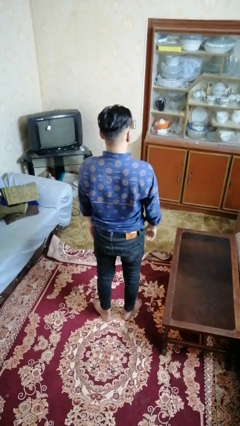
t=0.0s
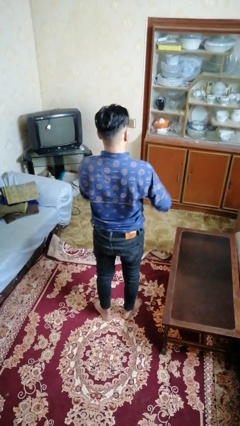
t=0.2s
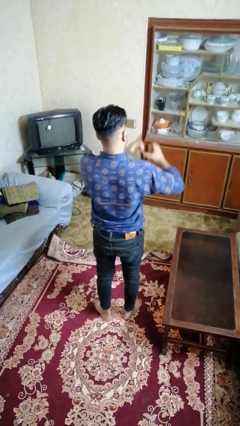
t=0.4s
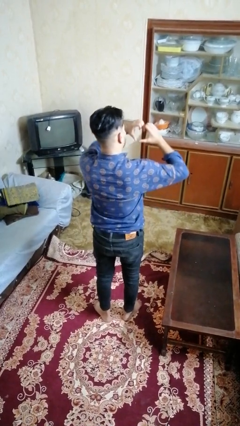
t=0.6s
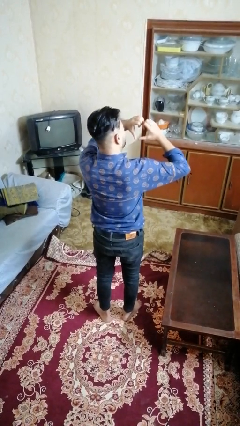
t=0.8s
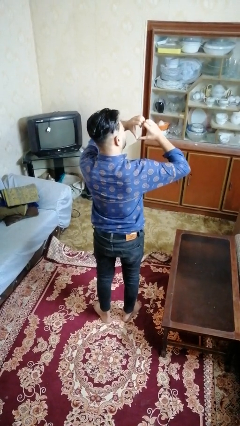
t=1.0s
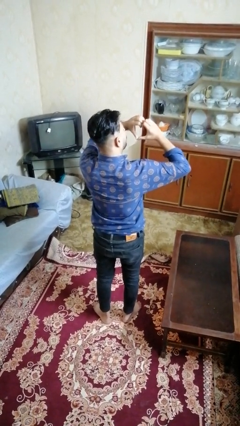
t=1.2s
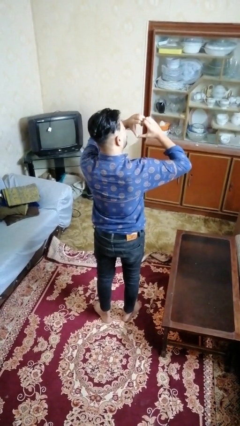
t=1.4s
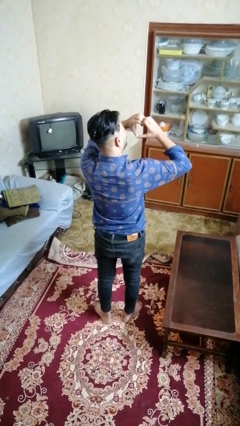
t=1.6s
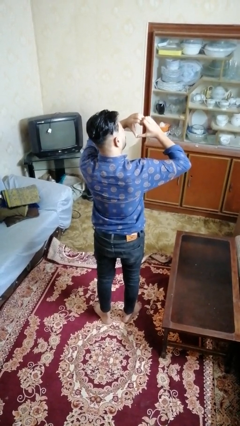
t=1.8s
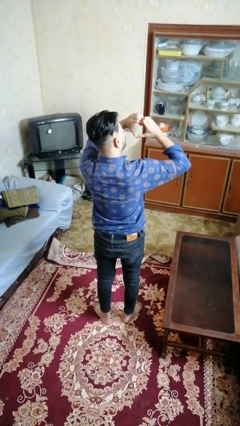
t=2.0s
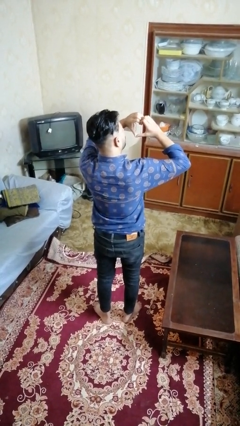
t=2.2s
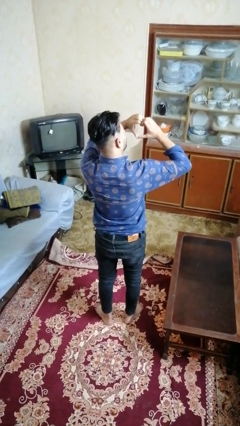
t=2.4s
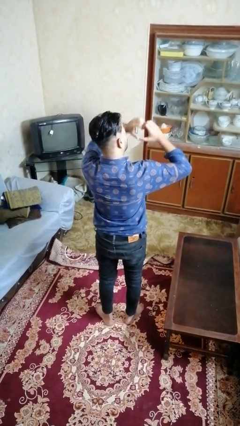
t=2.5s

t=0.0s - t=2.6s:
person gestures heart

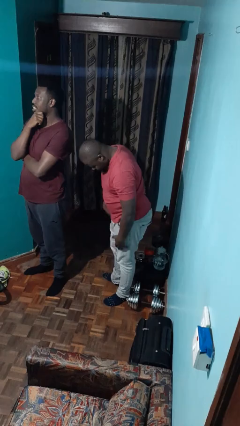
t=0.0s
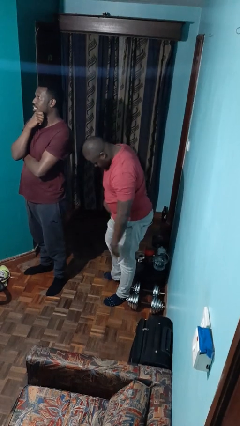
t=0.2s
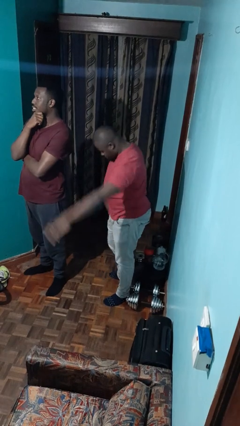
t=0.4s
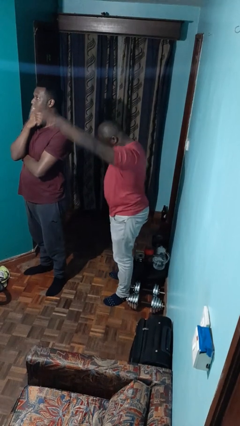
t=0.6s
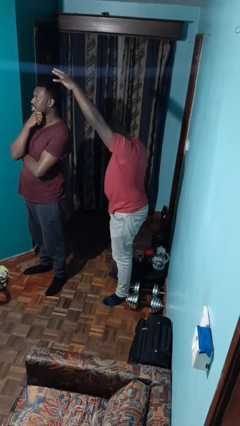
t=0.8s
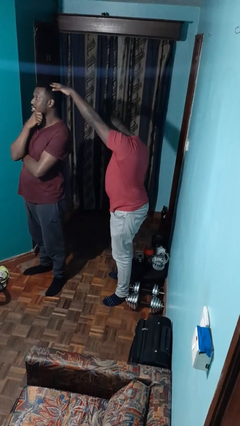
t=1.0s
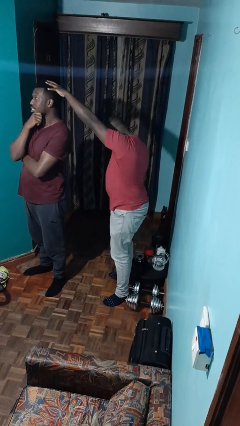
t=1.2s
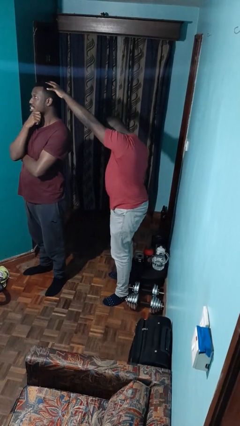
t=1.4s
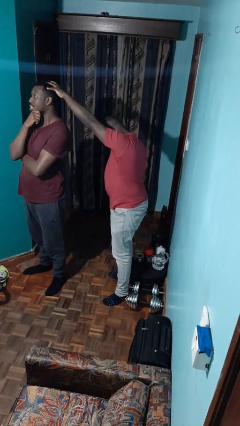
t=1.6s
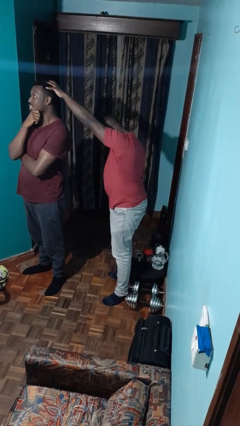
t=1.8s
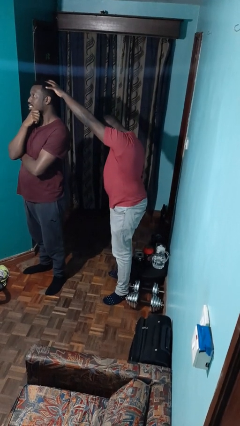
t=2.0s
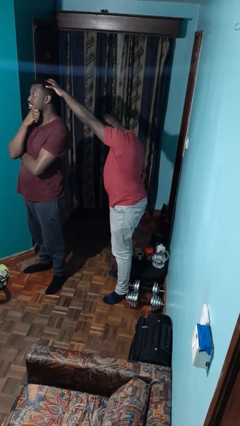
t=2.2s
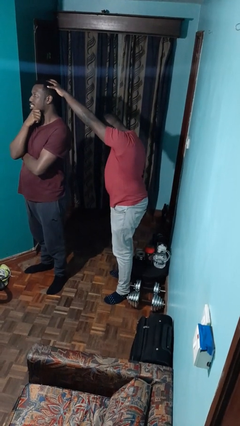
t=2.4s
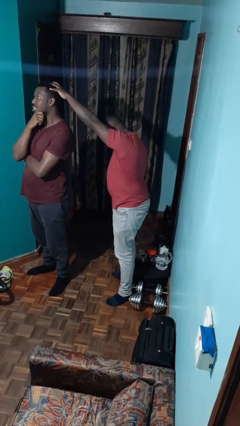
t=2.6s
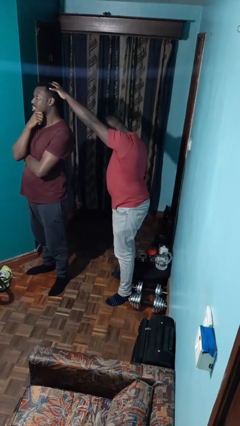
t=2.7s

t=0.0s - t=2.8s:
person grabs person by hair

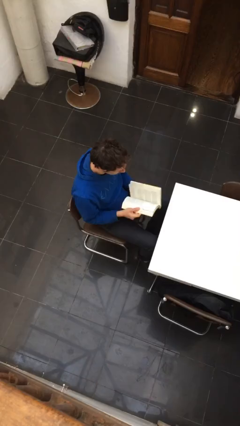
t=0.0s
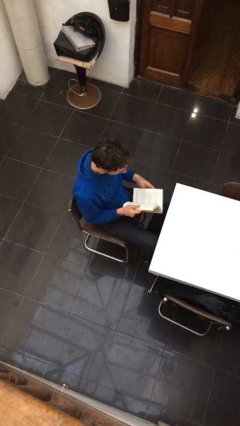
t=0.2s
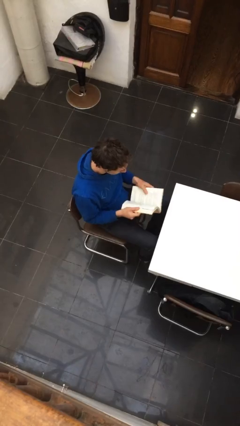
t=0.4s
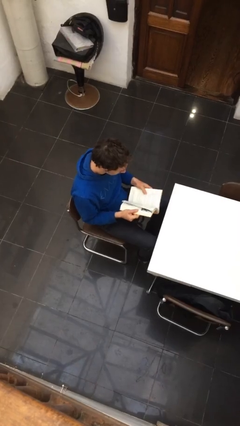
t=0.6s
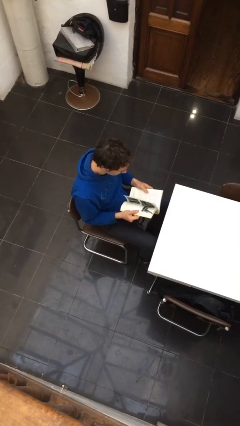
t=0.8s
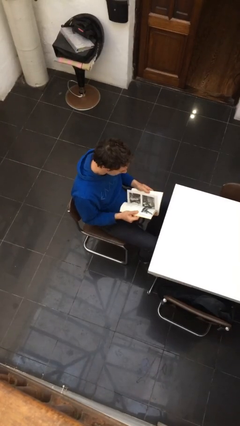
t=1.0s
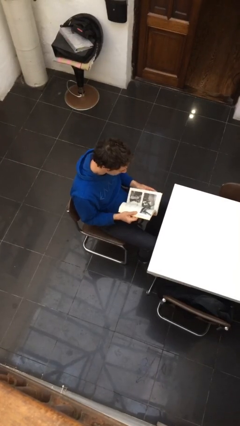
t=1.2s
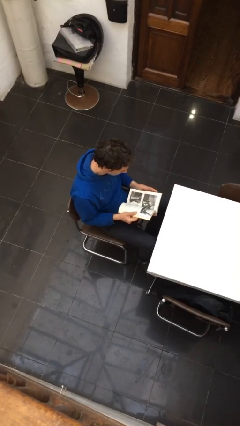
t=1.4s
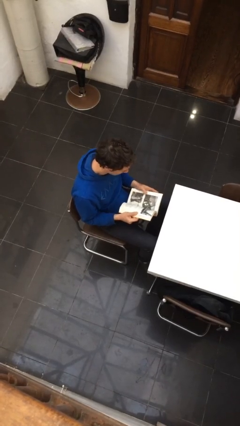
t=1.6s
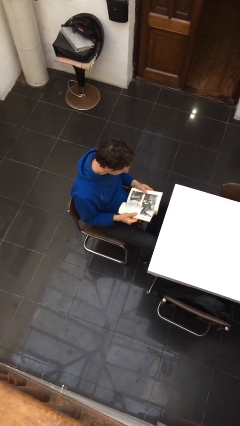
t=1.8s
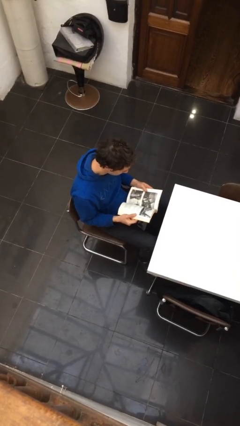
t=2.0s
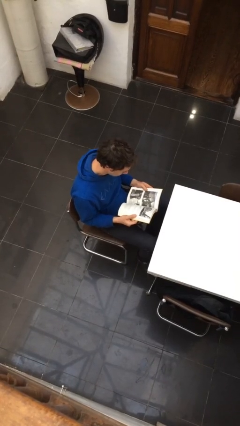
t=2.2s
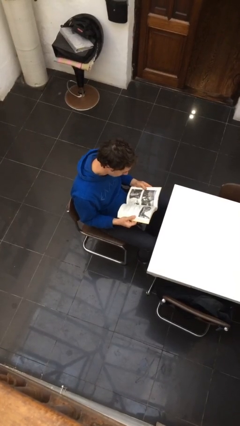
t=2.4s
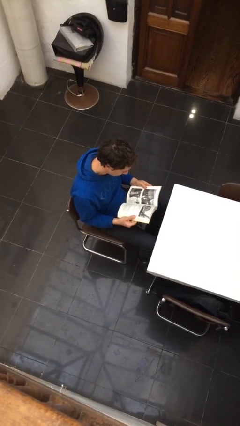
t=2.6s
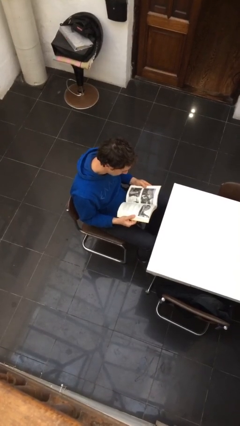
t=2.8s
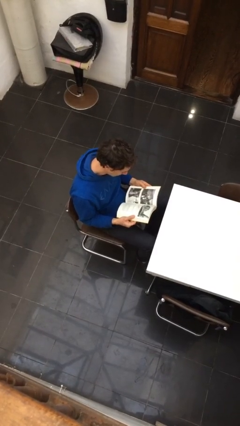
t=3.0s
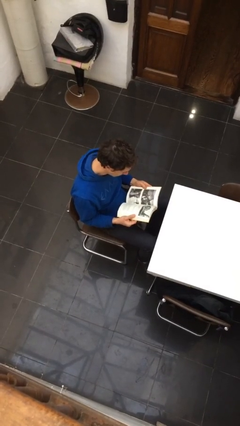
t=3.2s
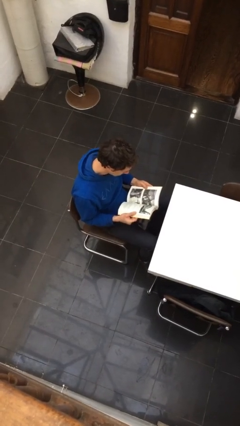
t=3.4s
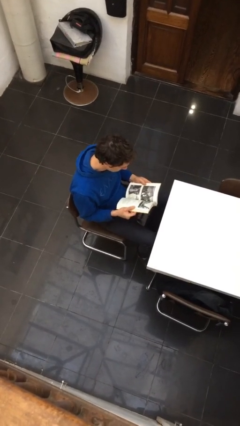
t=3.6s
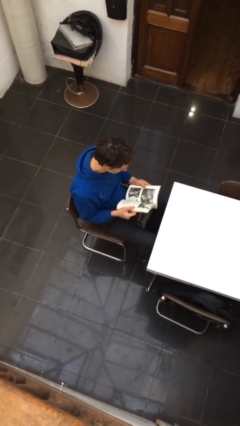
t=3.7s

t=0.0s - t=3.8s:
person reads document

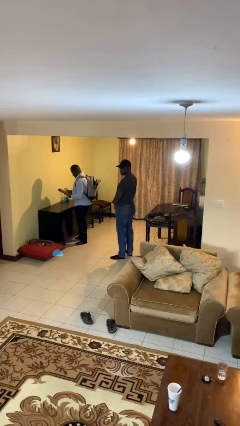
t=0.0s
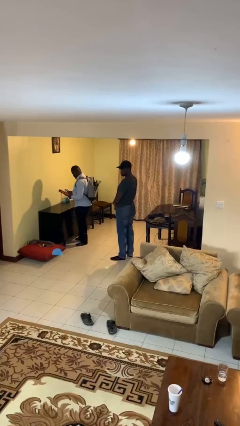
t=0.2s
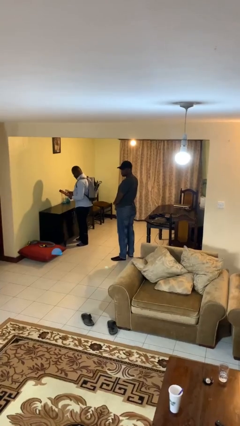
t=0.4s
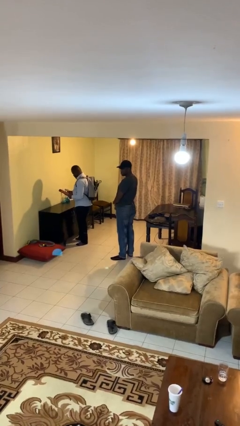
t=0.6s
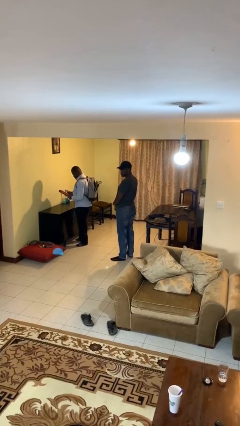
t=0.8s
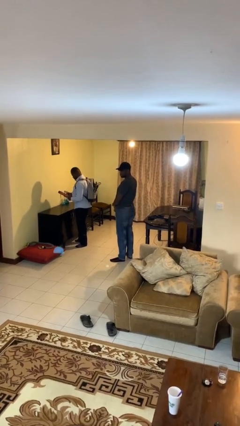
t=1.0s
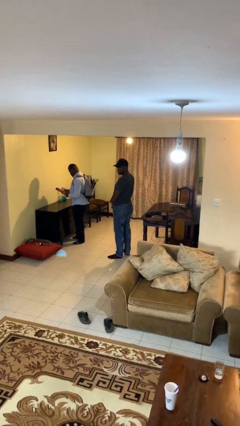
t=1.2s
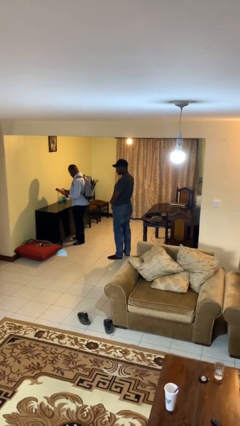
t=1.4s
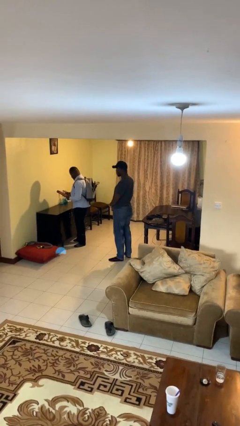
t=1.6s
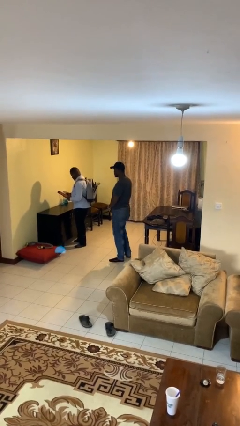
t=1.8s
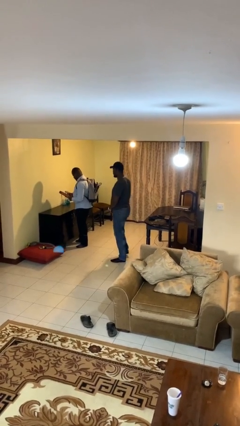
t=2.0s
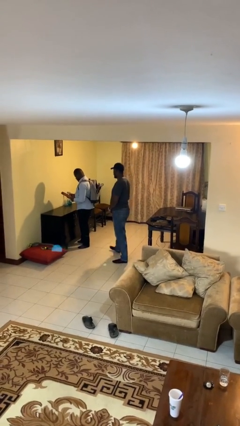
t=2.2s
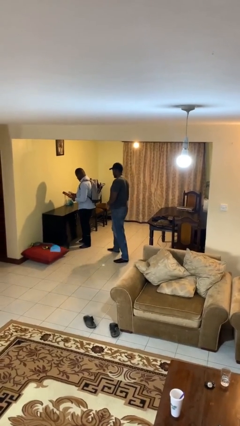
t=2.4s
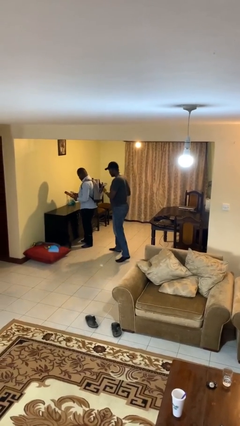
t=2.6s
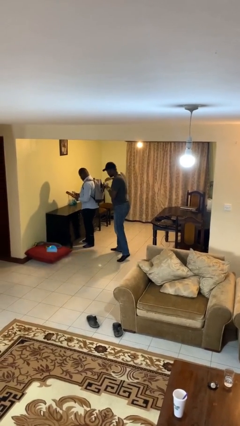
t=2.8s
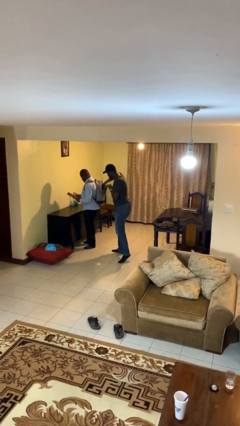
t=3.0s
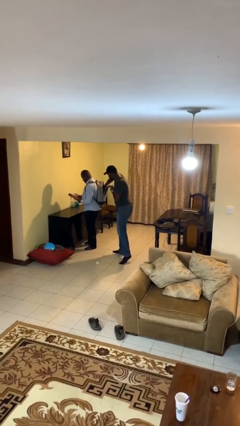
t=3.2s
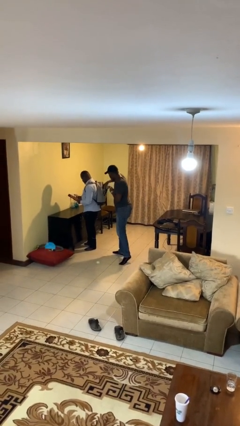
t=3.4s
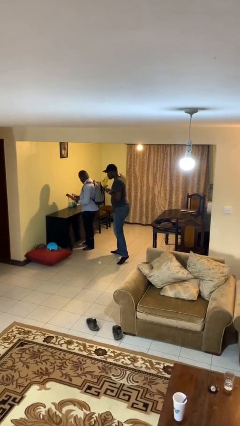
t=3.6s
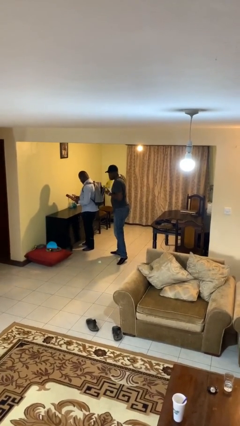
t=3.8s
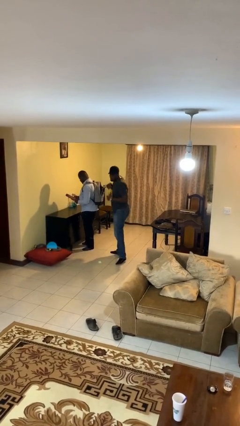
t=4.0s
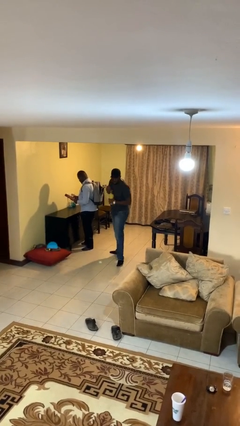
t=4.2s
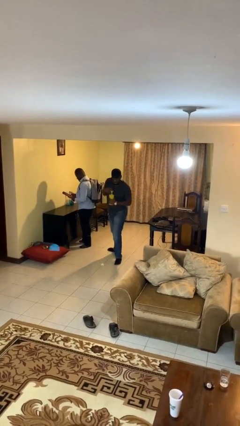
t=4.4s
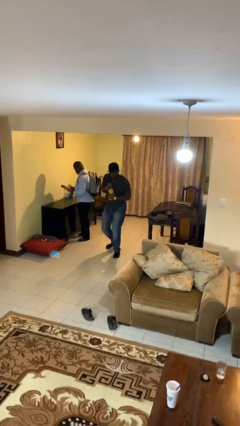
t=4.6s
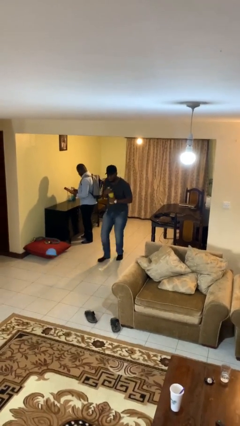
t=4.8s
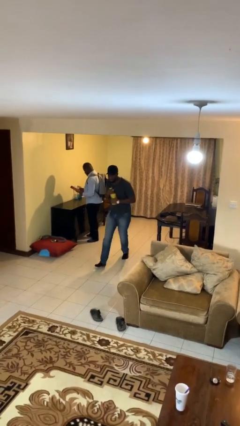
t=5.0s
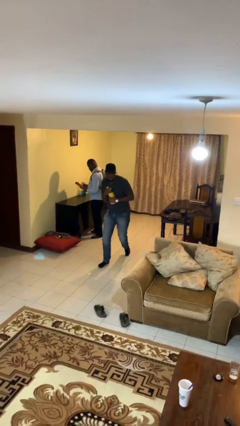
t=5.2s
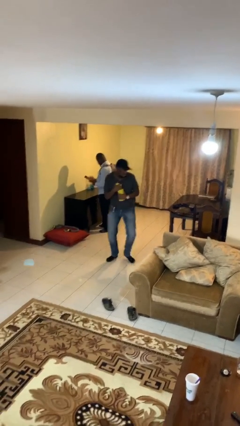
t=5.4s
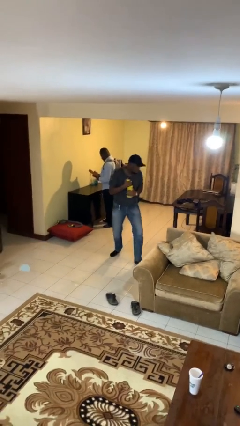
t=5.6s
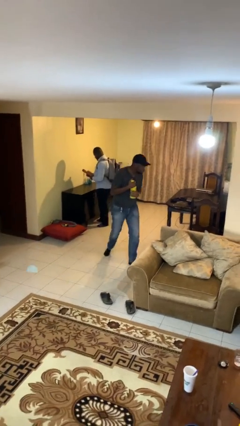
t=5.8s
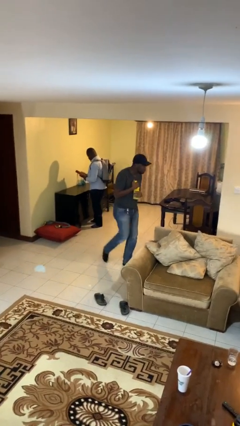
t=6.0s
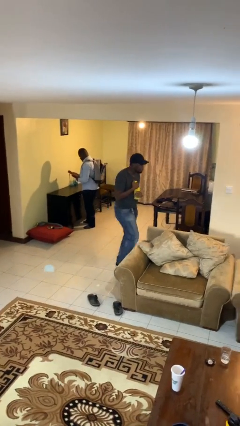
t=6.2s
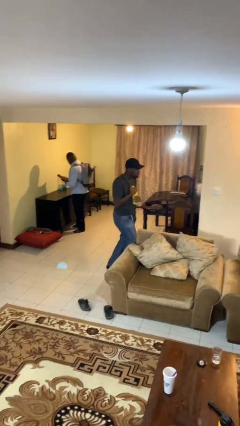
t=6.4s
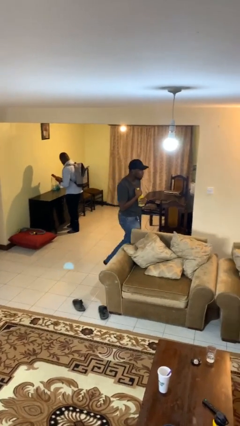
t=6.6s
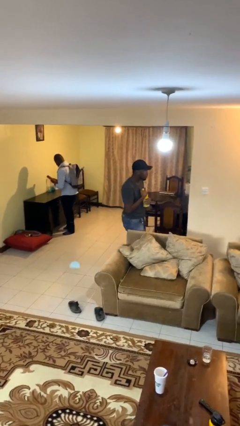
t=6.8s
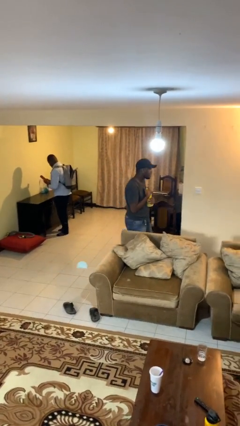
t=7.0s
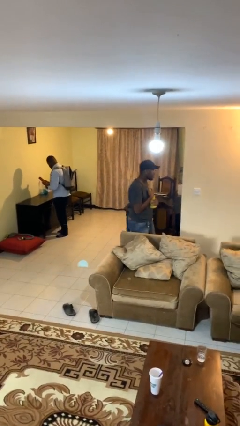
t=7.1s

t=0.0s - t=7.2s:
person steals object from person

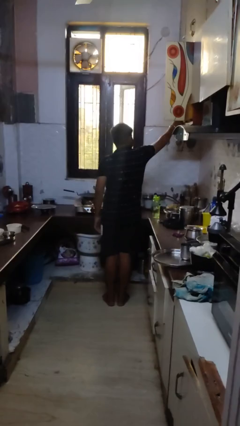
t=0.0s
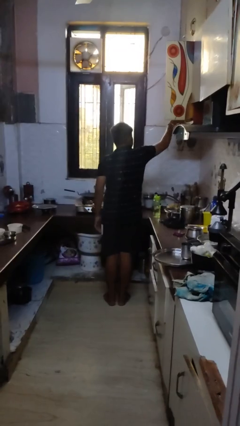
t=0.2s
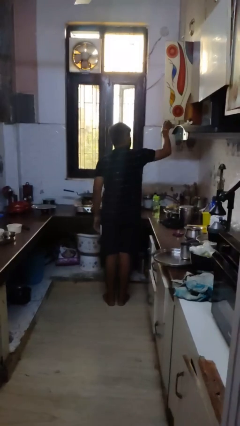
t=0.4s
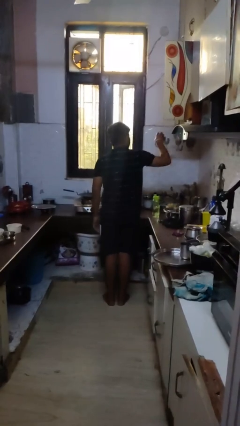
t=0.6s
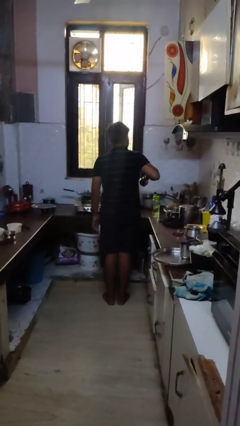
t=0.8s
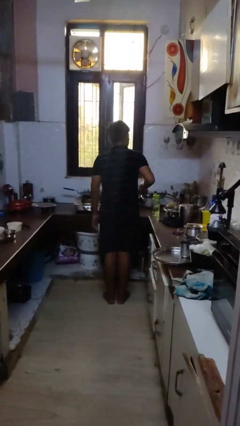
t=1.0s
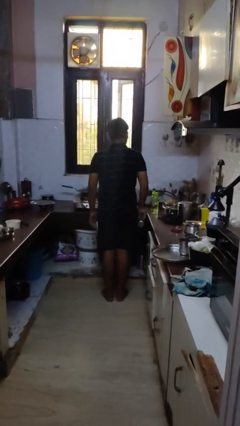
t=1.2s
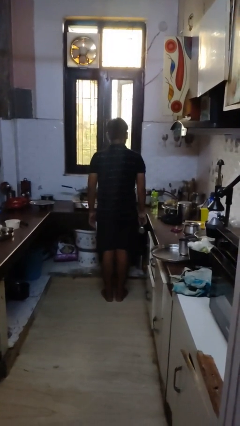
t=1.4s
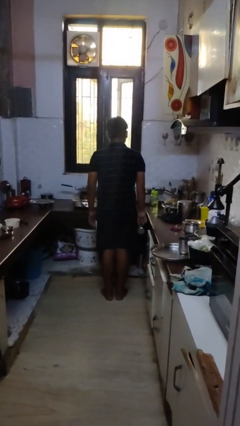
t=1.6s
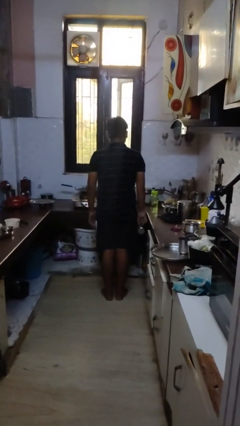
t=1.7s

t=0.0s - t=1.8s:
person takes object from cabinet
